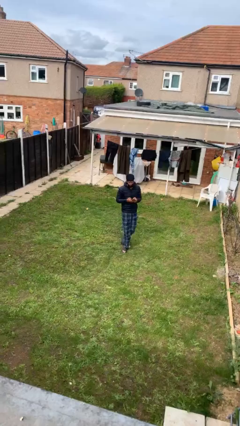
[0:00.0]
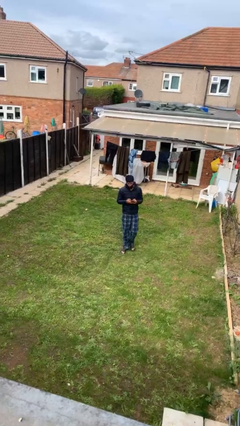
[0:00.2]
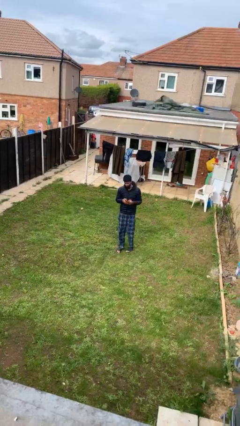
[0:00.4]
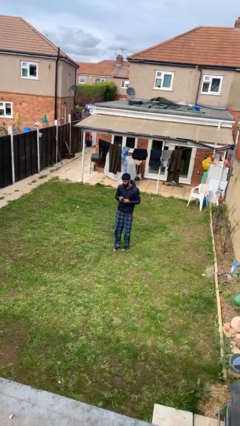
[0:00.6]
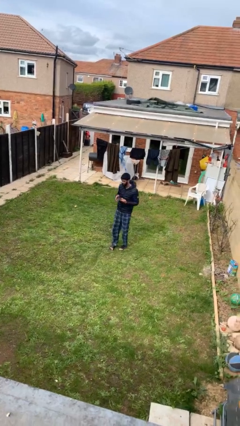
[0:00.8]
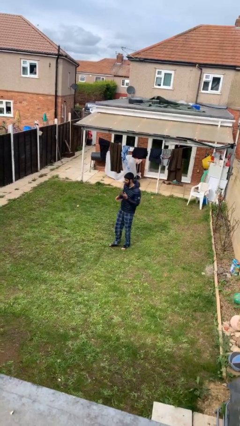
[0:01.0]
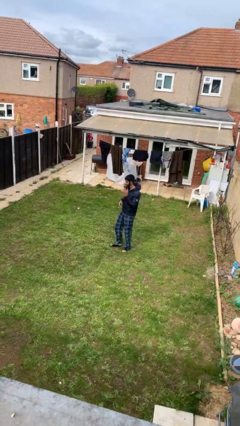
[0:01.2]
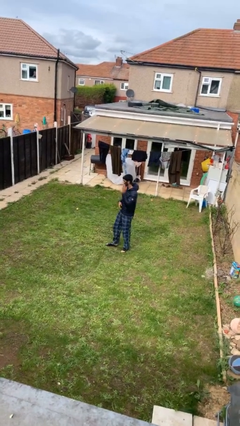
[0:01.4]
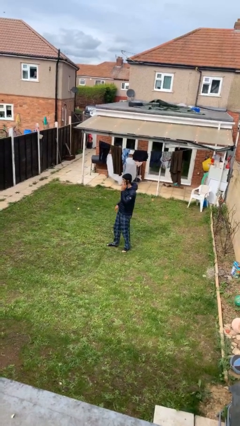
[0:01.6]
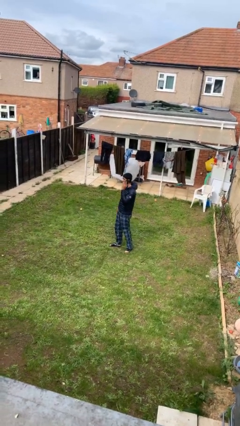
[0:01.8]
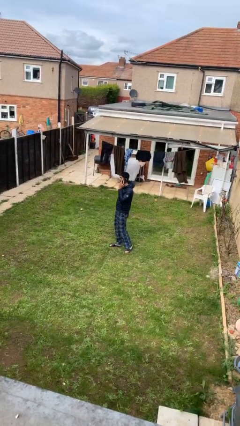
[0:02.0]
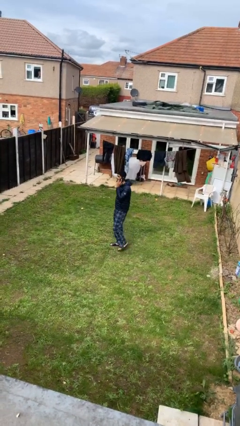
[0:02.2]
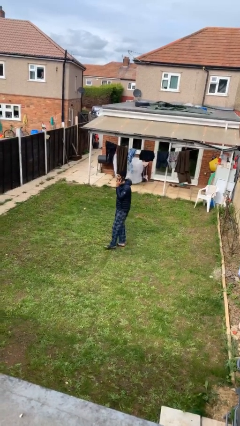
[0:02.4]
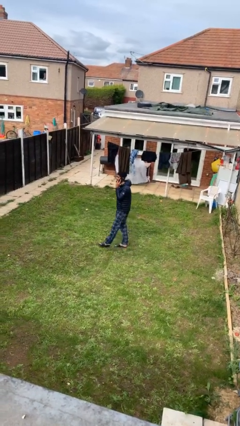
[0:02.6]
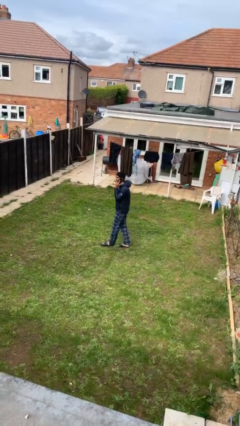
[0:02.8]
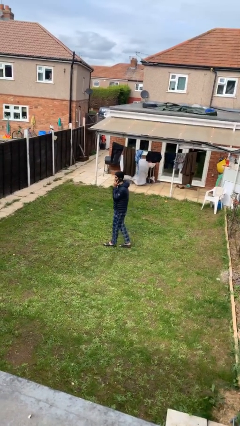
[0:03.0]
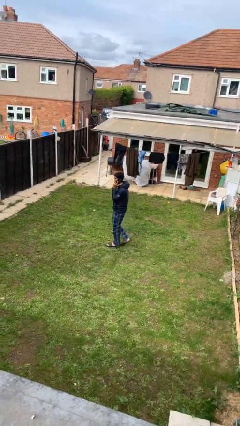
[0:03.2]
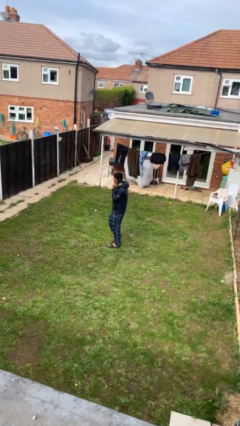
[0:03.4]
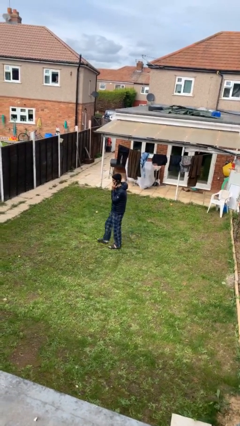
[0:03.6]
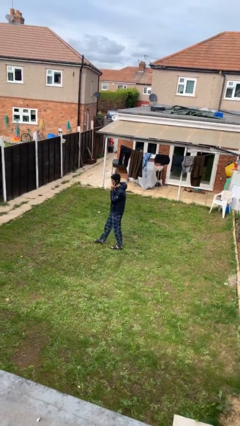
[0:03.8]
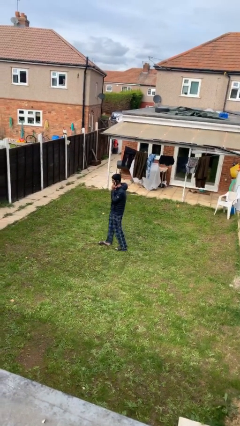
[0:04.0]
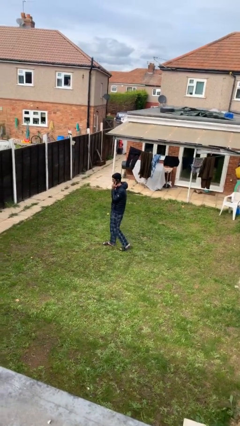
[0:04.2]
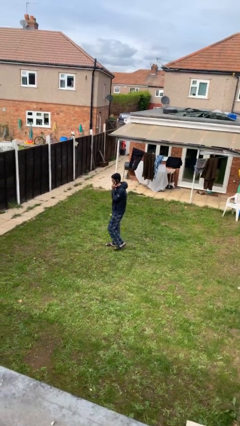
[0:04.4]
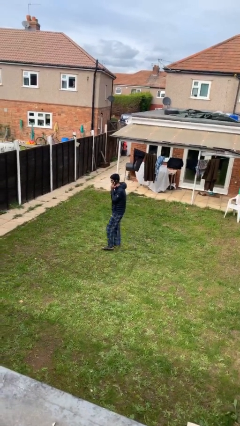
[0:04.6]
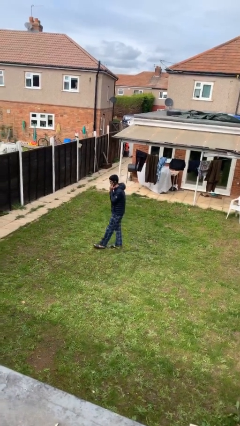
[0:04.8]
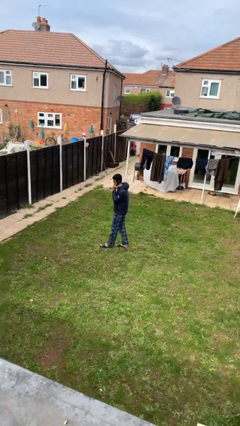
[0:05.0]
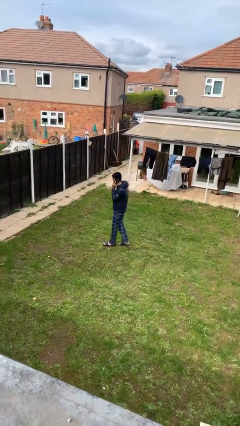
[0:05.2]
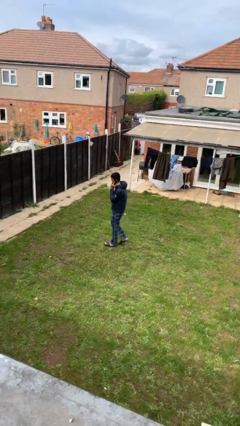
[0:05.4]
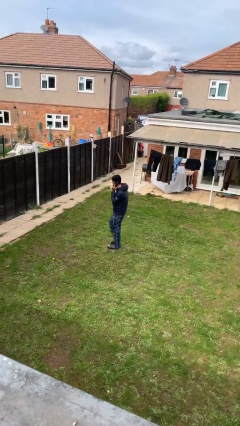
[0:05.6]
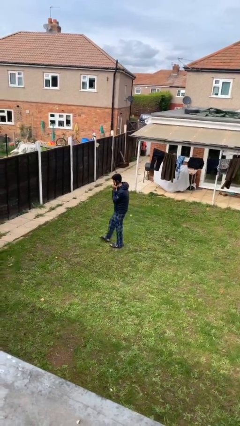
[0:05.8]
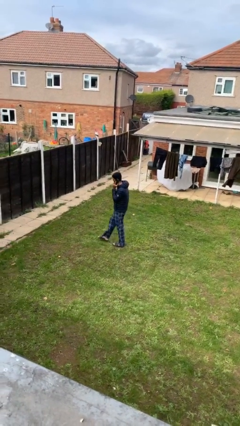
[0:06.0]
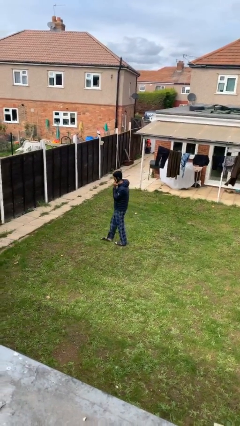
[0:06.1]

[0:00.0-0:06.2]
person talks on phone

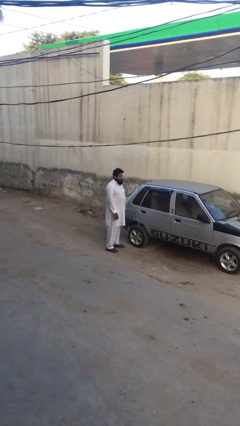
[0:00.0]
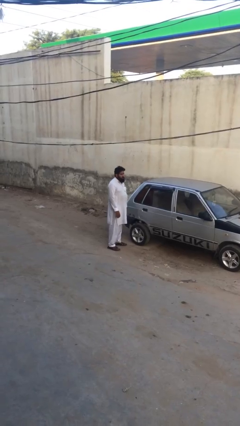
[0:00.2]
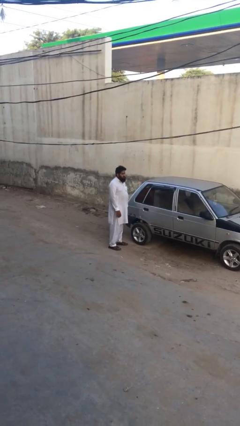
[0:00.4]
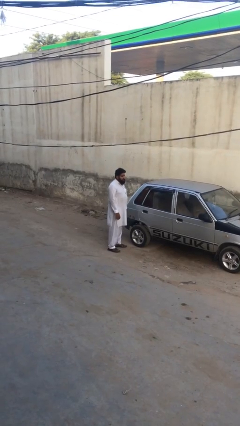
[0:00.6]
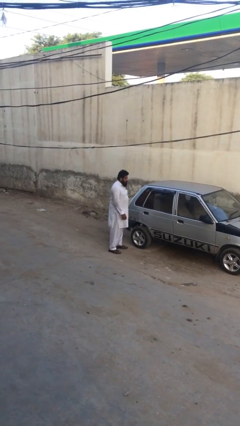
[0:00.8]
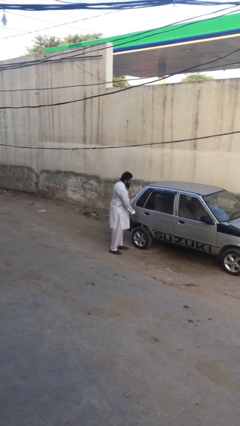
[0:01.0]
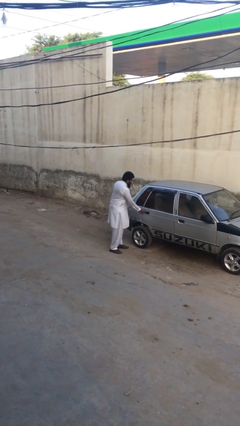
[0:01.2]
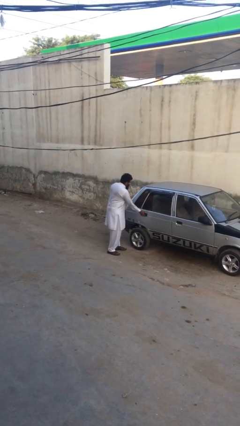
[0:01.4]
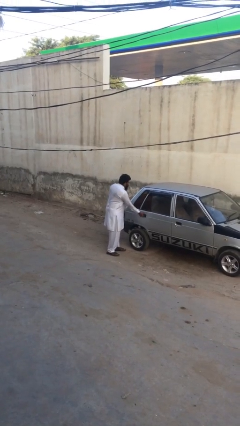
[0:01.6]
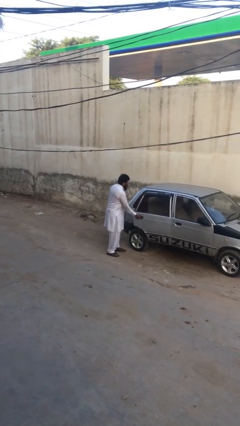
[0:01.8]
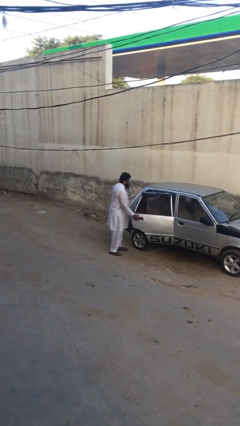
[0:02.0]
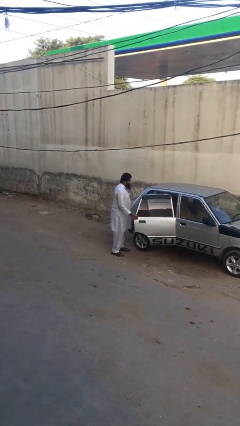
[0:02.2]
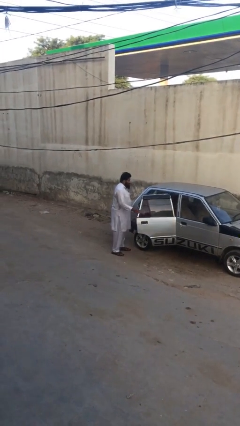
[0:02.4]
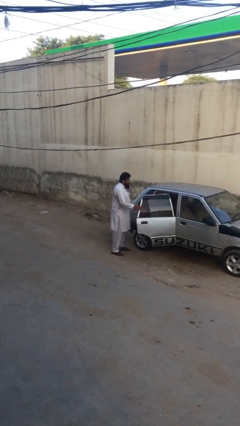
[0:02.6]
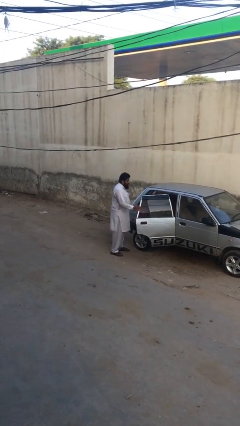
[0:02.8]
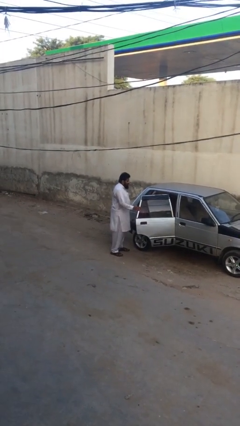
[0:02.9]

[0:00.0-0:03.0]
person opens car door

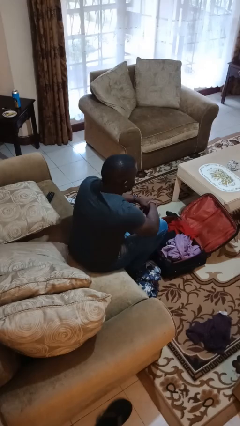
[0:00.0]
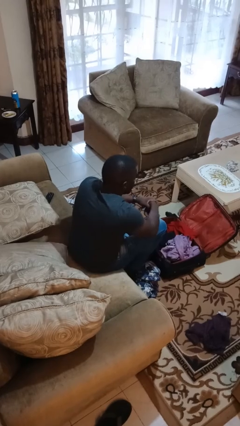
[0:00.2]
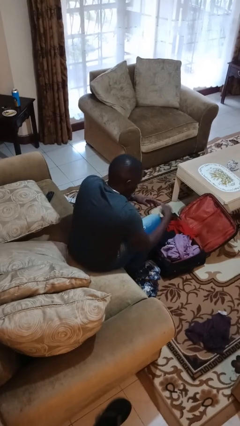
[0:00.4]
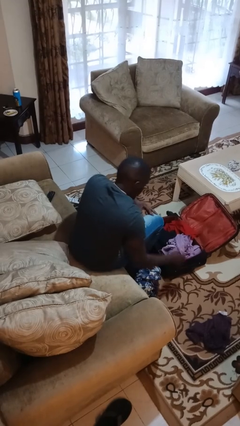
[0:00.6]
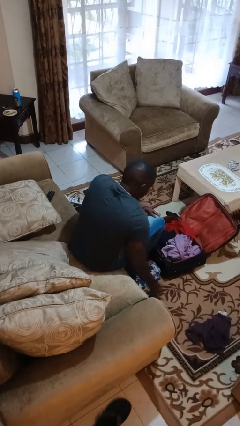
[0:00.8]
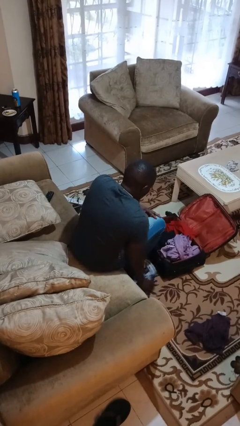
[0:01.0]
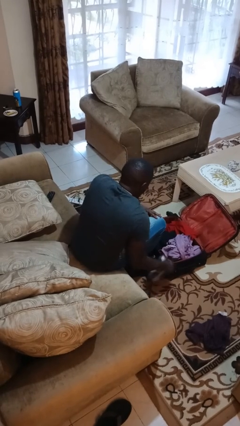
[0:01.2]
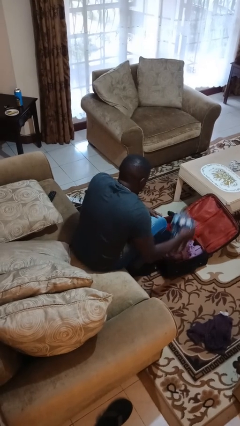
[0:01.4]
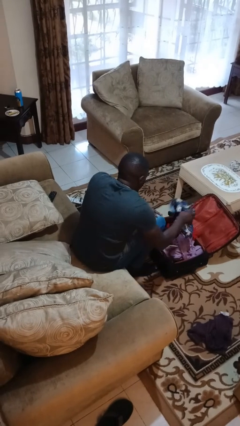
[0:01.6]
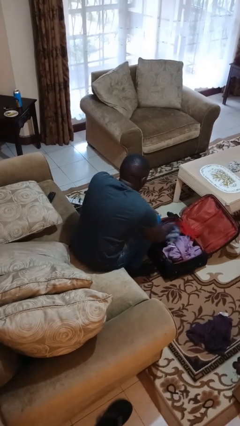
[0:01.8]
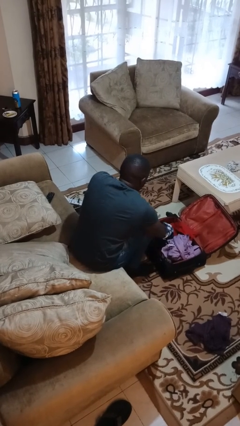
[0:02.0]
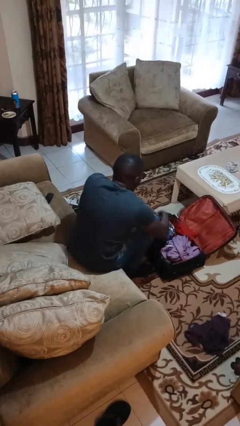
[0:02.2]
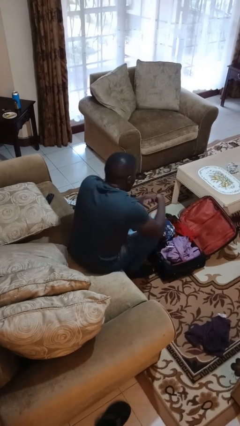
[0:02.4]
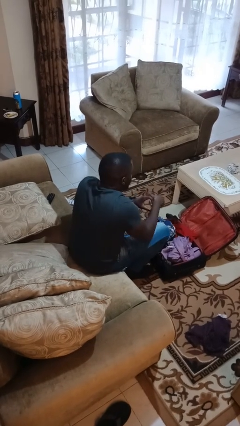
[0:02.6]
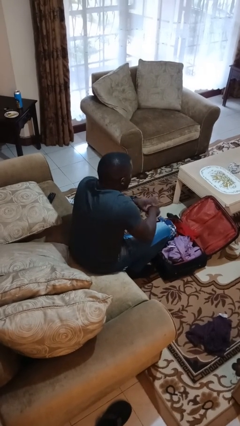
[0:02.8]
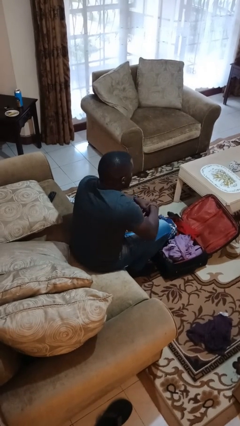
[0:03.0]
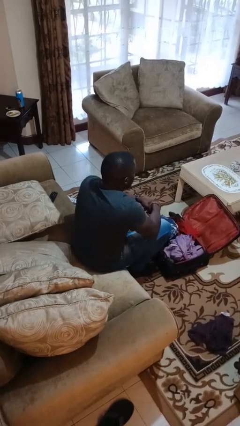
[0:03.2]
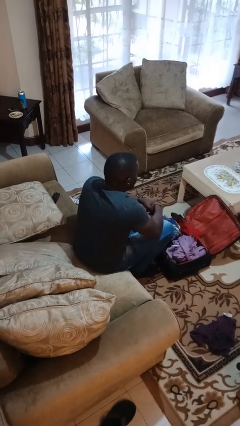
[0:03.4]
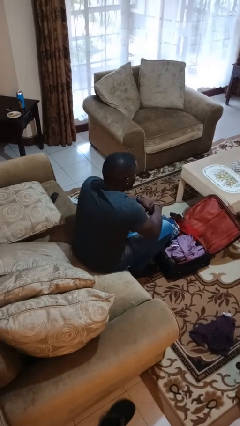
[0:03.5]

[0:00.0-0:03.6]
person loads clothes into suitcase

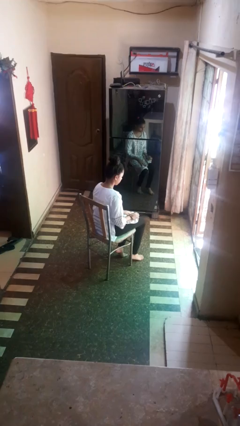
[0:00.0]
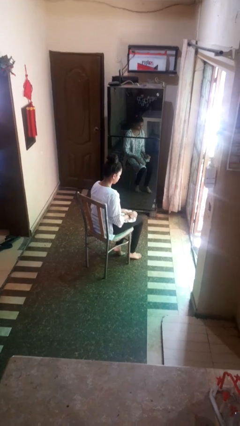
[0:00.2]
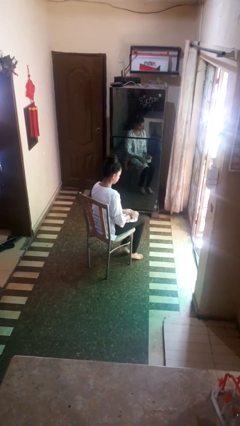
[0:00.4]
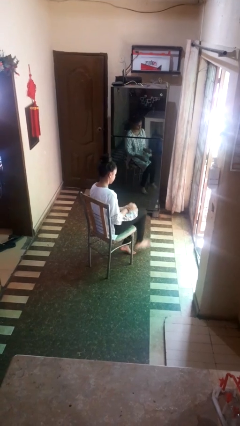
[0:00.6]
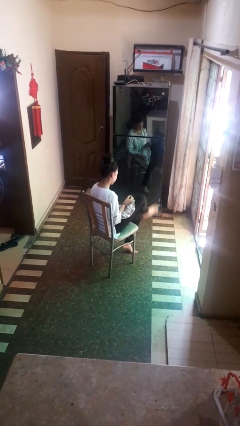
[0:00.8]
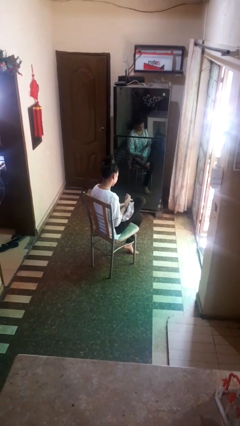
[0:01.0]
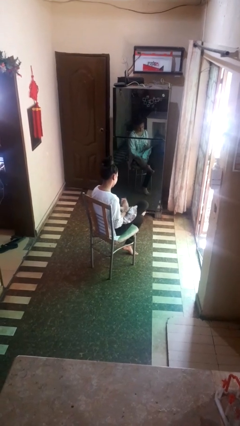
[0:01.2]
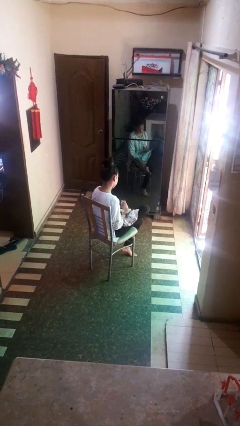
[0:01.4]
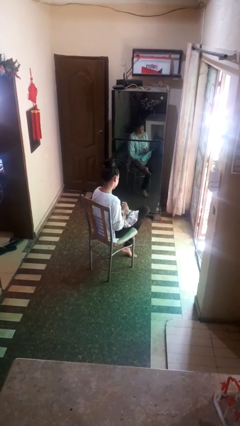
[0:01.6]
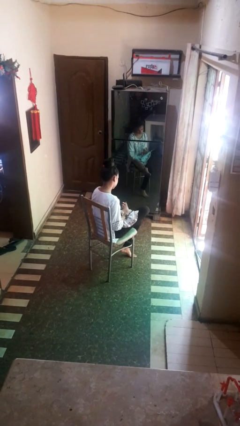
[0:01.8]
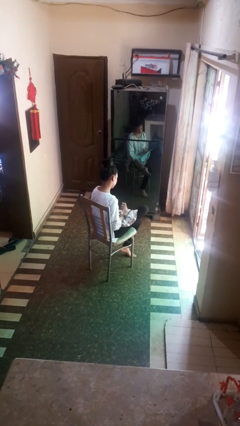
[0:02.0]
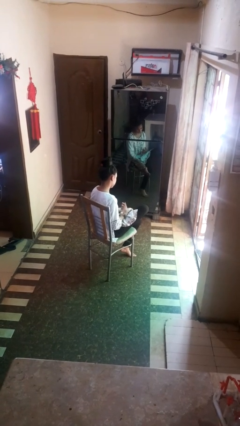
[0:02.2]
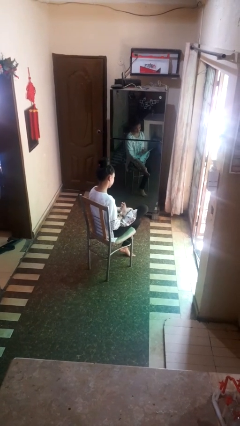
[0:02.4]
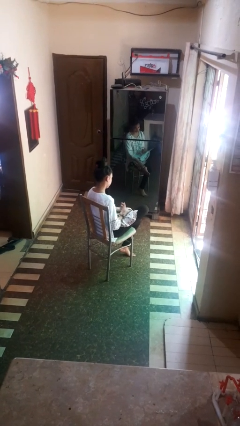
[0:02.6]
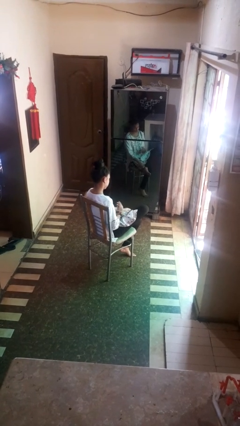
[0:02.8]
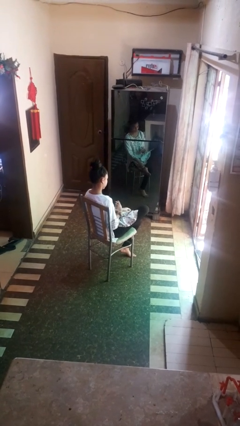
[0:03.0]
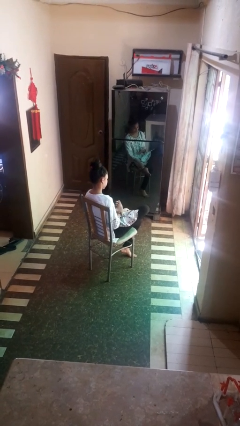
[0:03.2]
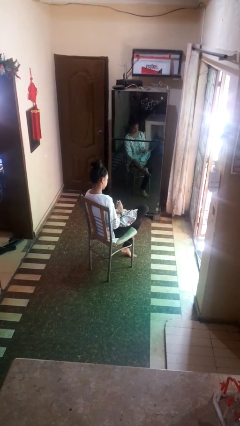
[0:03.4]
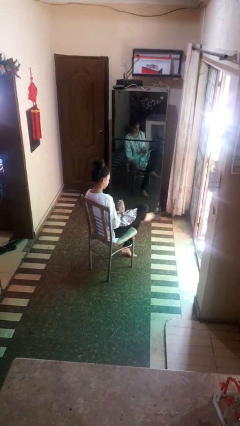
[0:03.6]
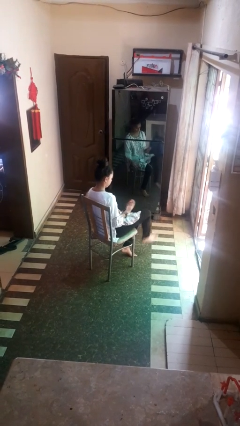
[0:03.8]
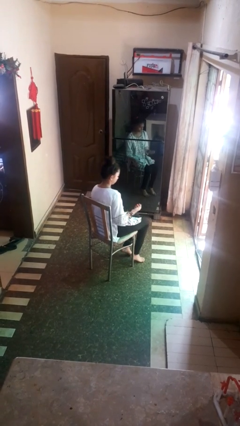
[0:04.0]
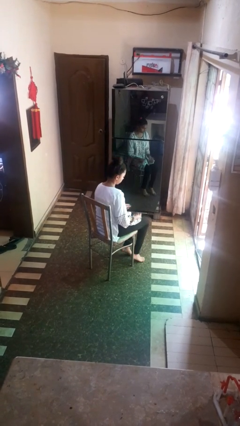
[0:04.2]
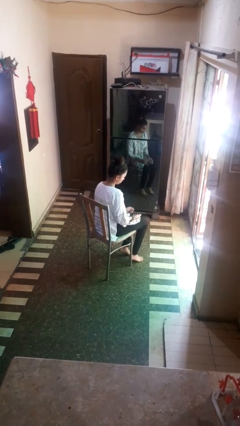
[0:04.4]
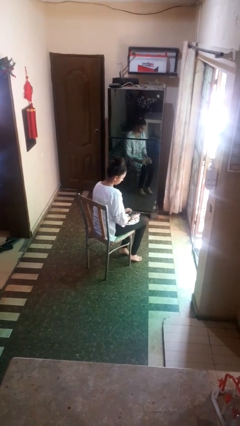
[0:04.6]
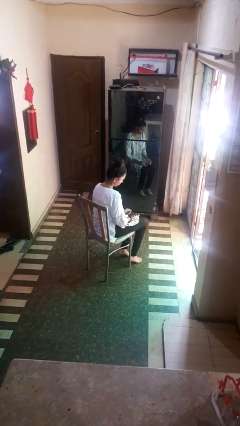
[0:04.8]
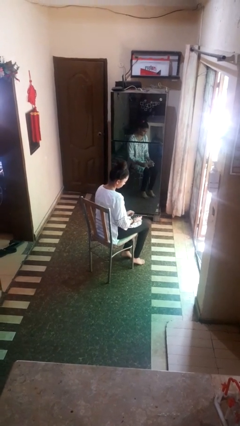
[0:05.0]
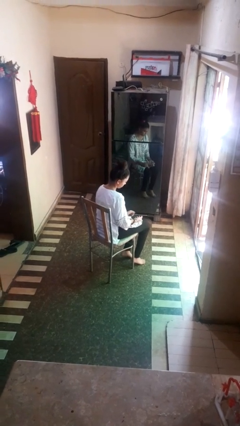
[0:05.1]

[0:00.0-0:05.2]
person rubs foot
